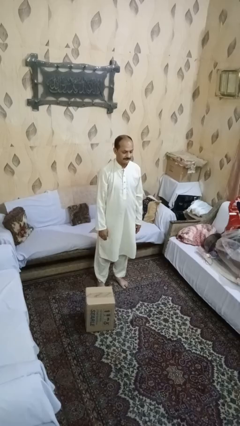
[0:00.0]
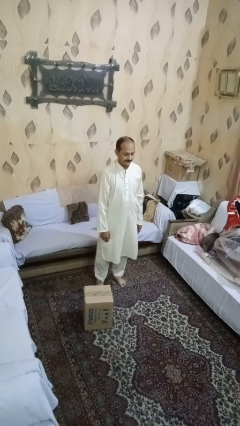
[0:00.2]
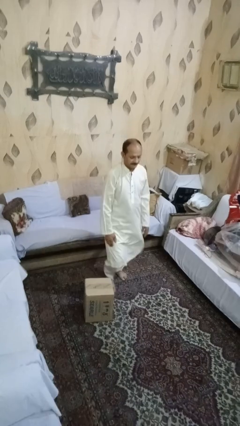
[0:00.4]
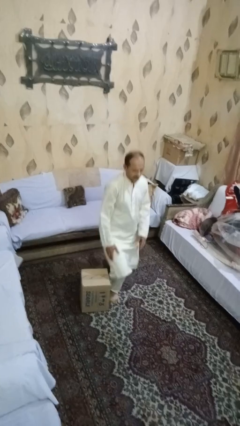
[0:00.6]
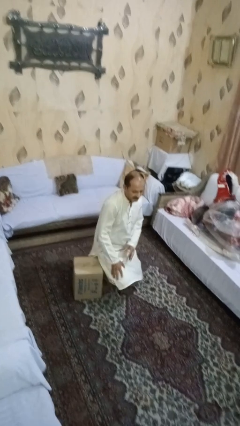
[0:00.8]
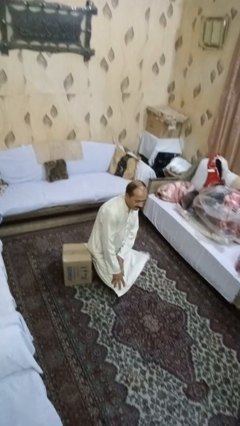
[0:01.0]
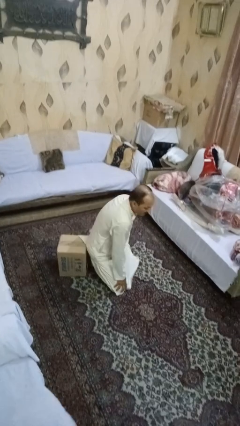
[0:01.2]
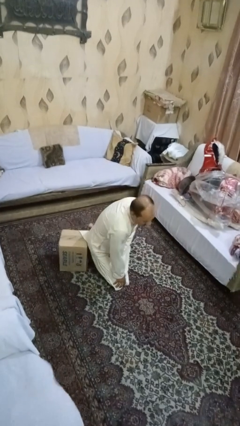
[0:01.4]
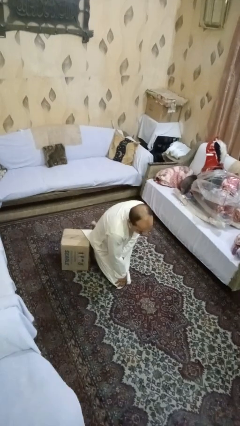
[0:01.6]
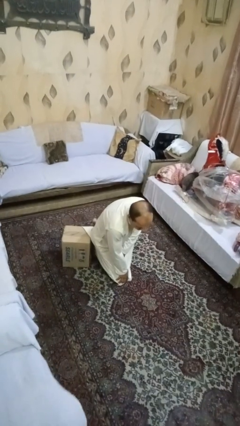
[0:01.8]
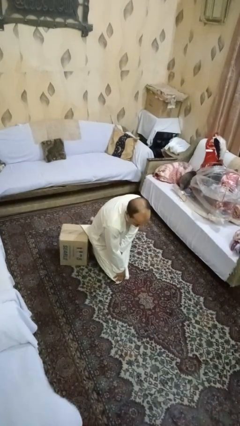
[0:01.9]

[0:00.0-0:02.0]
person trips on object on floor

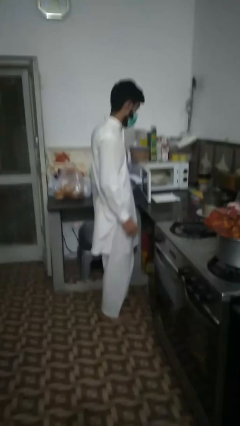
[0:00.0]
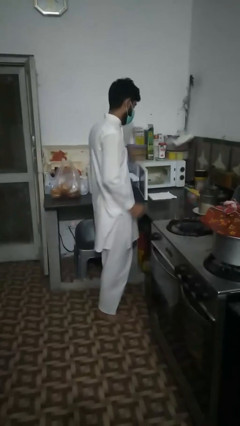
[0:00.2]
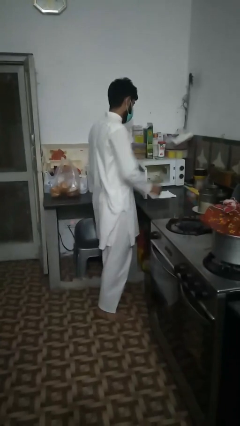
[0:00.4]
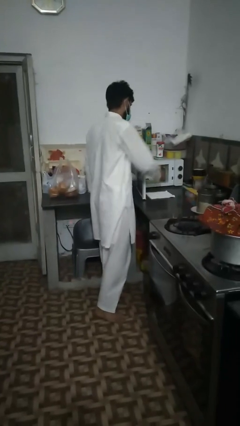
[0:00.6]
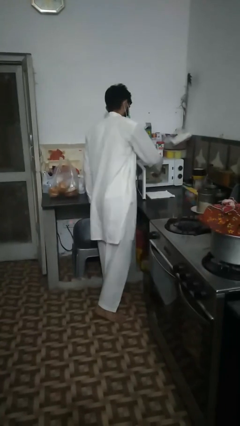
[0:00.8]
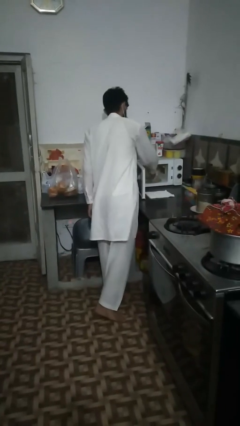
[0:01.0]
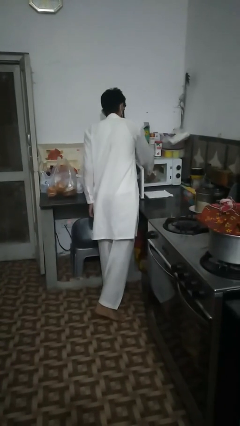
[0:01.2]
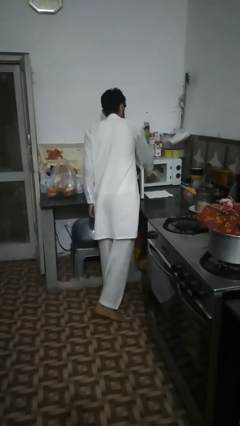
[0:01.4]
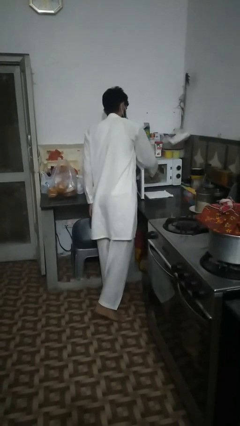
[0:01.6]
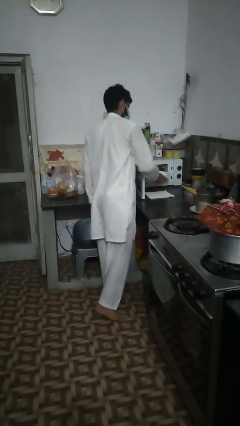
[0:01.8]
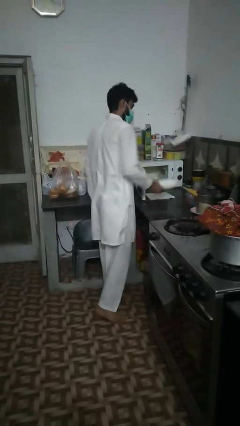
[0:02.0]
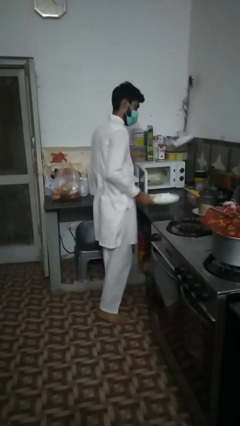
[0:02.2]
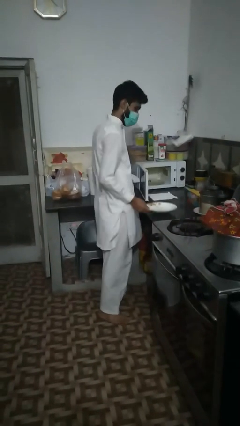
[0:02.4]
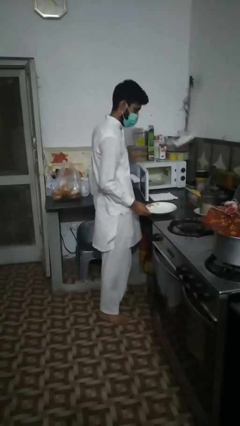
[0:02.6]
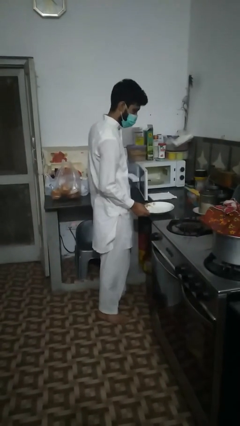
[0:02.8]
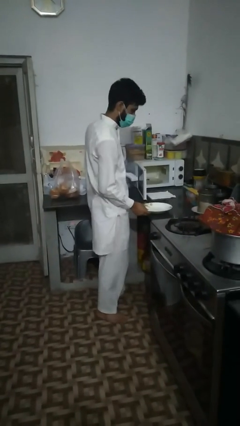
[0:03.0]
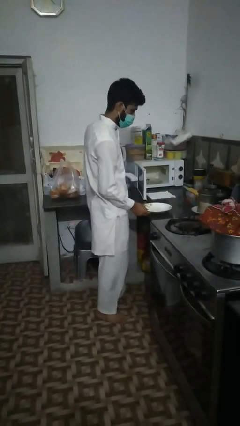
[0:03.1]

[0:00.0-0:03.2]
person takes object from microwave

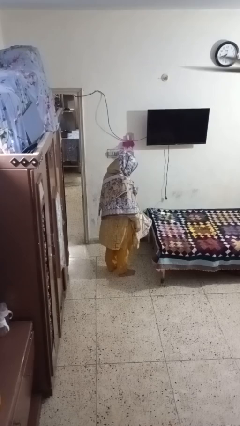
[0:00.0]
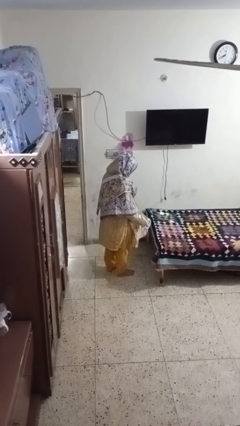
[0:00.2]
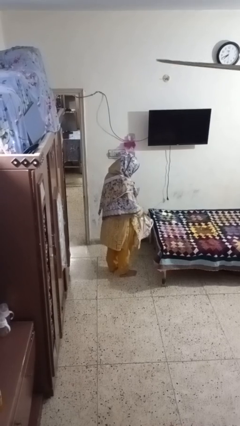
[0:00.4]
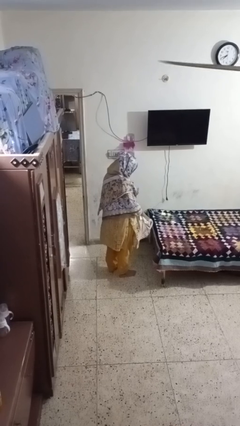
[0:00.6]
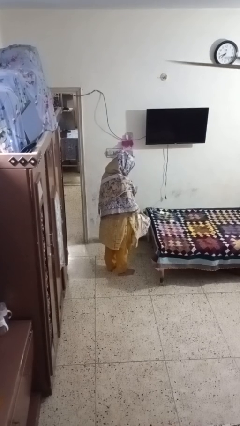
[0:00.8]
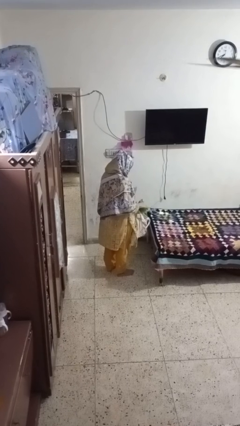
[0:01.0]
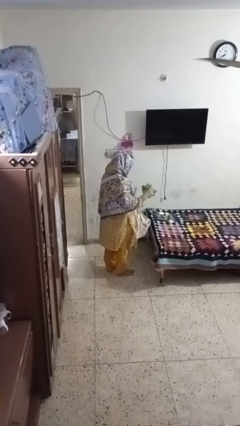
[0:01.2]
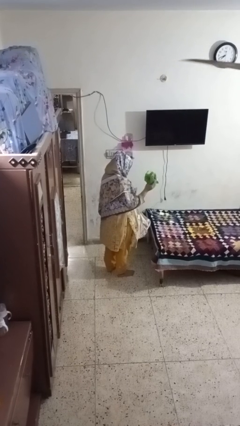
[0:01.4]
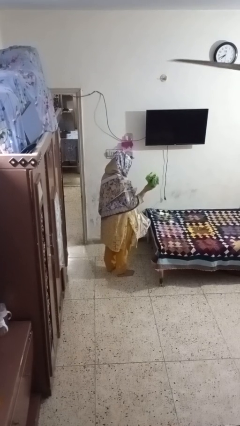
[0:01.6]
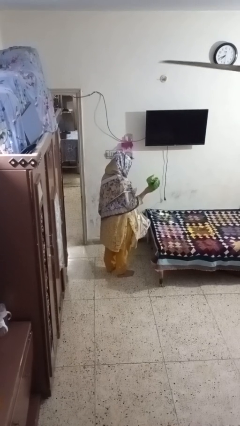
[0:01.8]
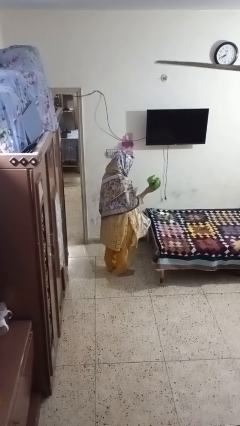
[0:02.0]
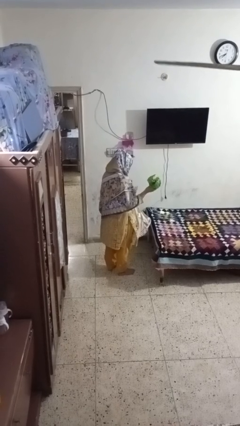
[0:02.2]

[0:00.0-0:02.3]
person takes object from bag

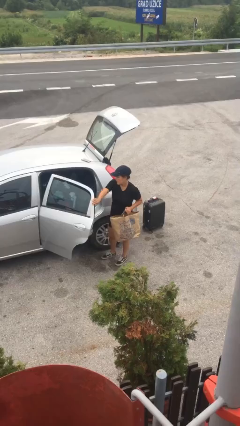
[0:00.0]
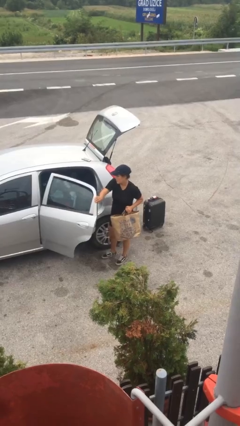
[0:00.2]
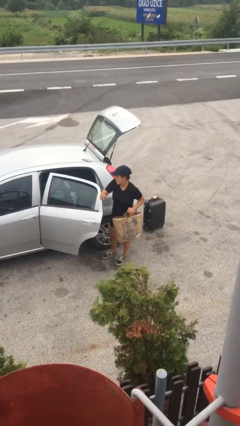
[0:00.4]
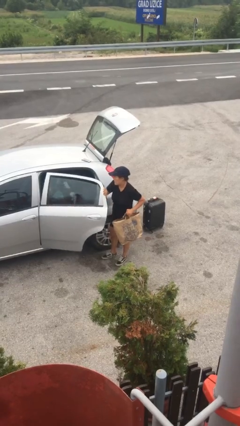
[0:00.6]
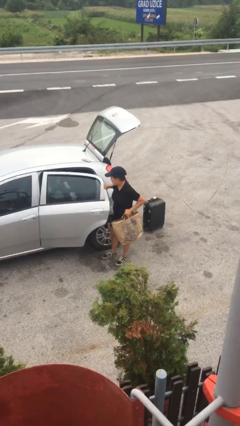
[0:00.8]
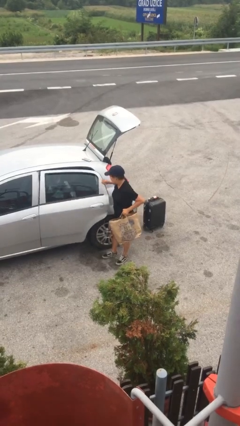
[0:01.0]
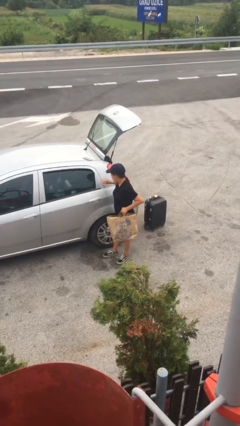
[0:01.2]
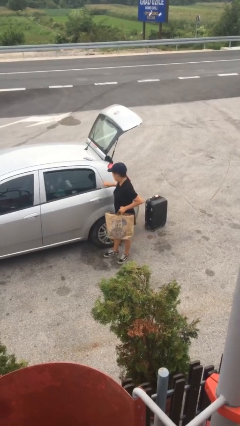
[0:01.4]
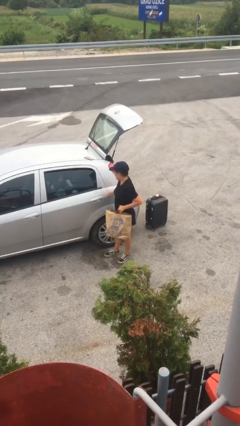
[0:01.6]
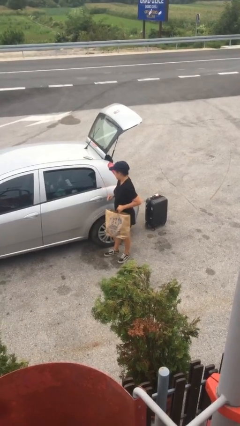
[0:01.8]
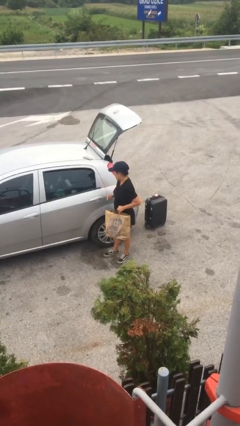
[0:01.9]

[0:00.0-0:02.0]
person closes car door

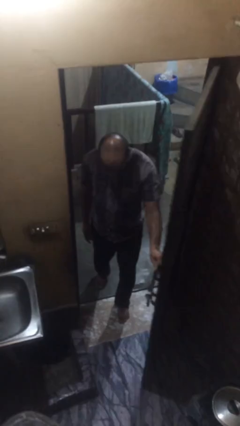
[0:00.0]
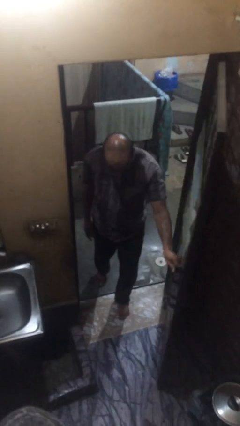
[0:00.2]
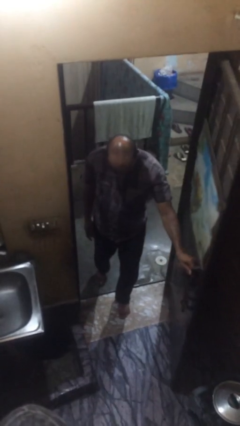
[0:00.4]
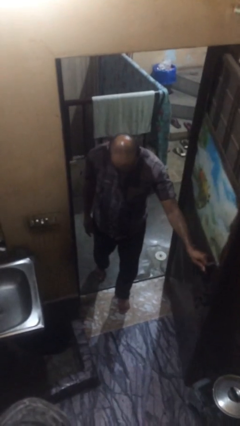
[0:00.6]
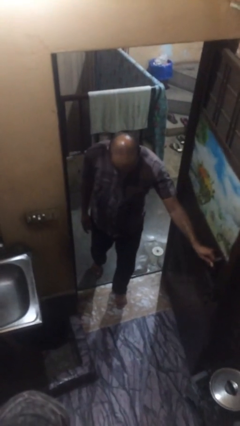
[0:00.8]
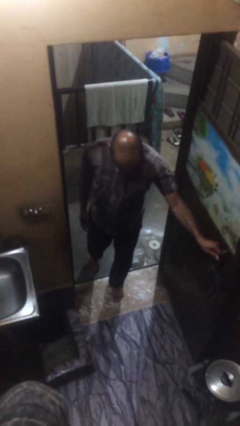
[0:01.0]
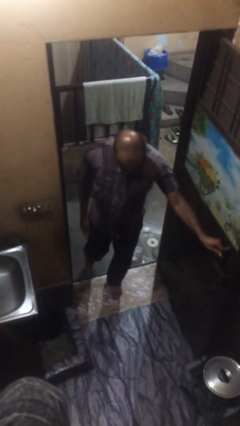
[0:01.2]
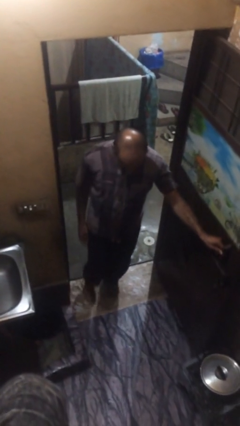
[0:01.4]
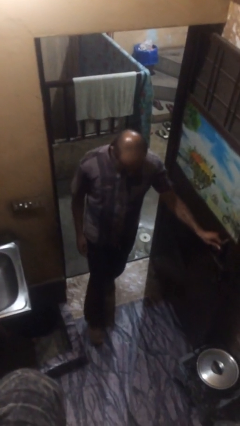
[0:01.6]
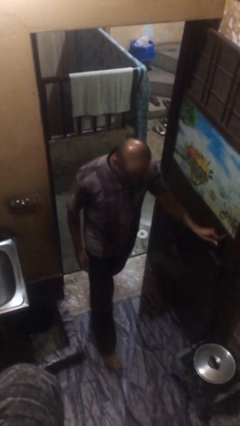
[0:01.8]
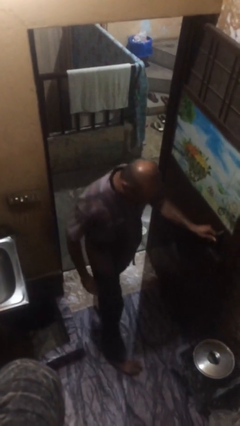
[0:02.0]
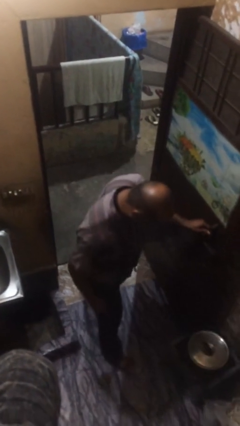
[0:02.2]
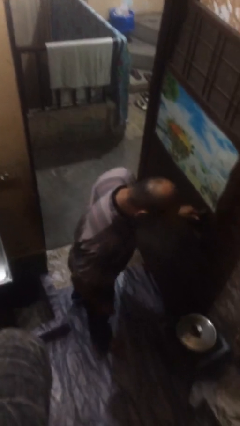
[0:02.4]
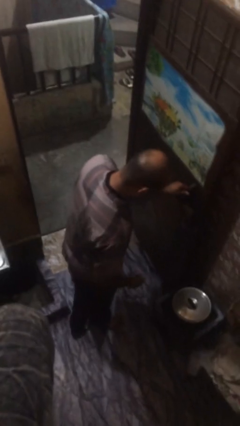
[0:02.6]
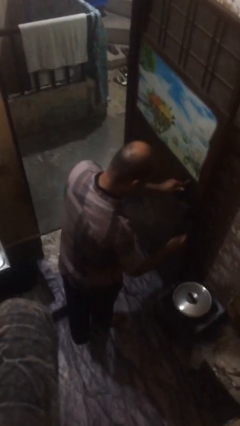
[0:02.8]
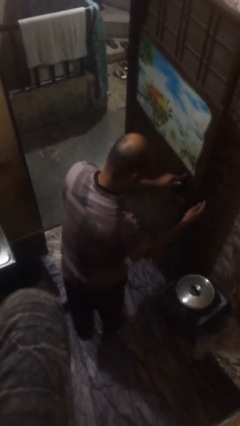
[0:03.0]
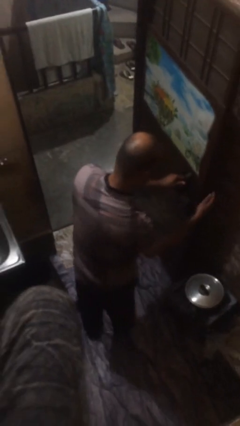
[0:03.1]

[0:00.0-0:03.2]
person enters scene through structure

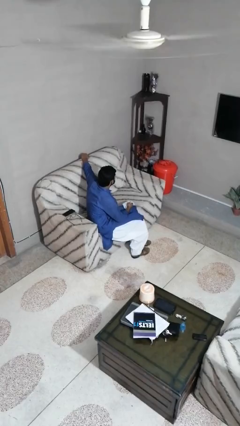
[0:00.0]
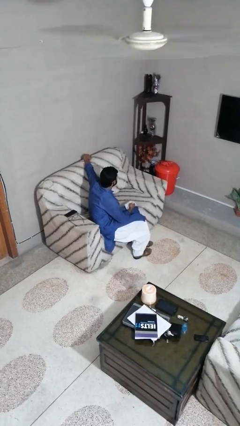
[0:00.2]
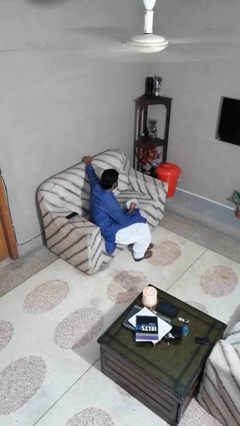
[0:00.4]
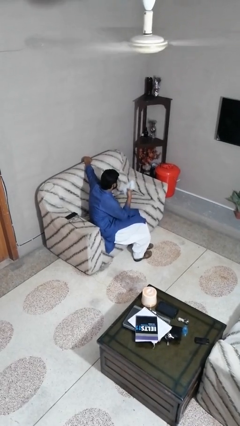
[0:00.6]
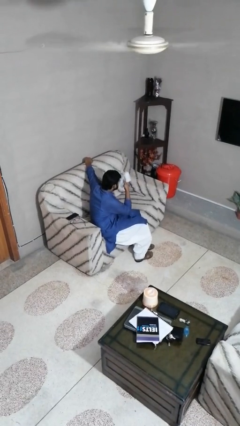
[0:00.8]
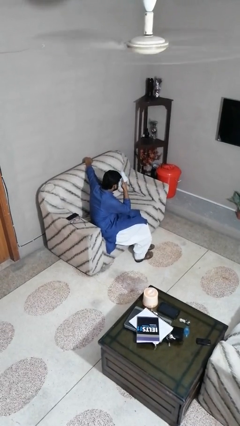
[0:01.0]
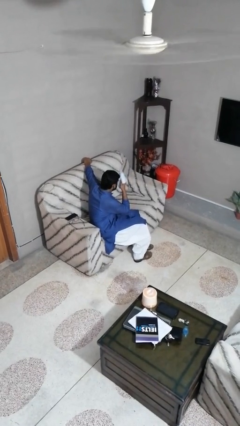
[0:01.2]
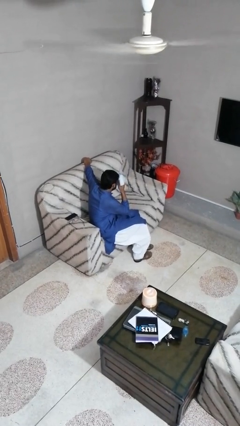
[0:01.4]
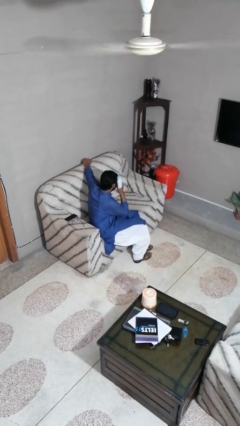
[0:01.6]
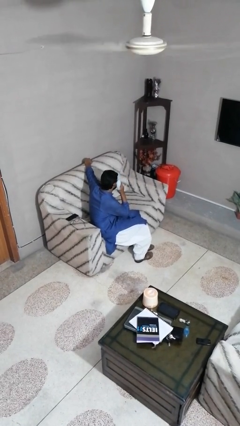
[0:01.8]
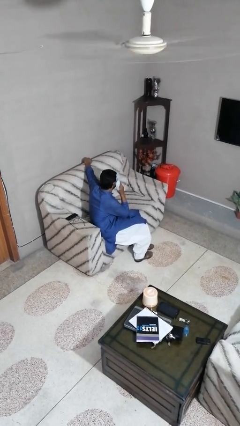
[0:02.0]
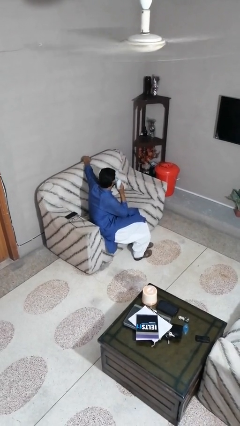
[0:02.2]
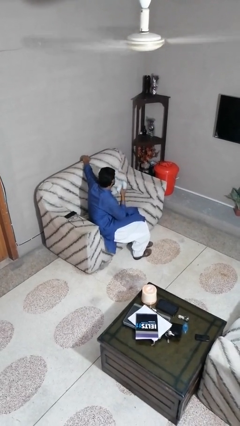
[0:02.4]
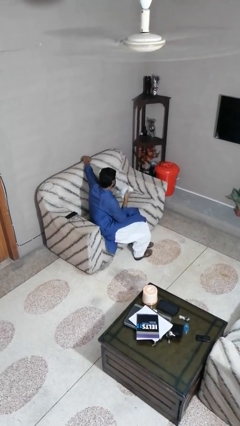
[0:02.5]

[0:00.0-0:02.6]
person wipes mouth with napkin

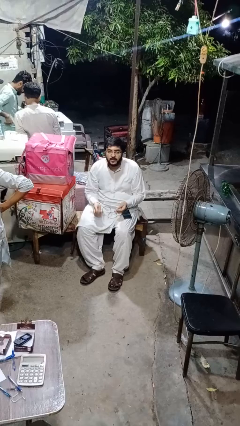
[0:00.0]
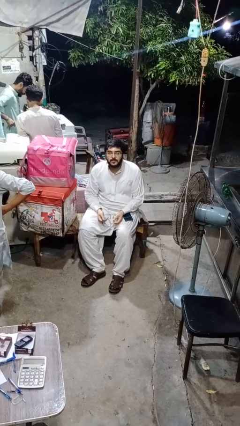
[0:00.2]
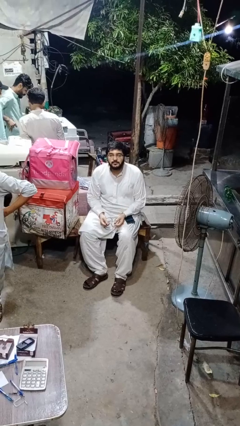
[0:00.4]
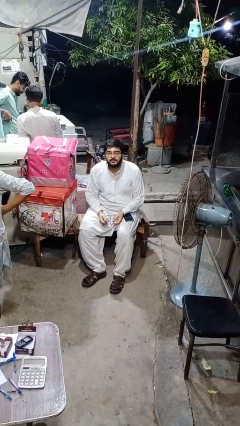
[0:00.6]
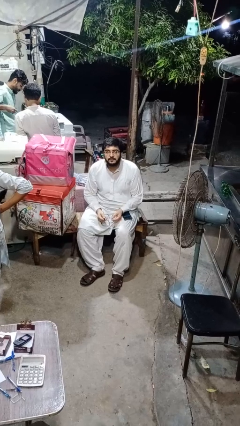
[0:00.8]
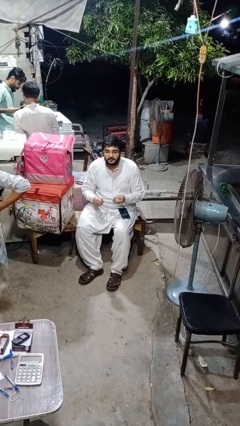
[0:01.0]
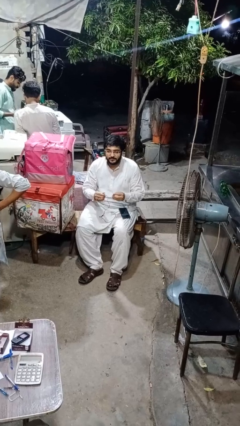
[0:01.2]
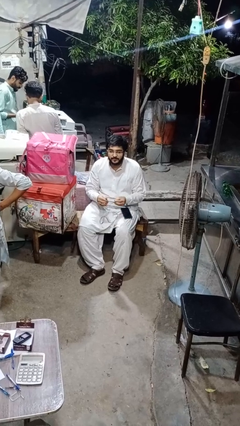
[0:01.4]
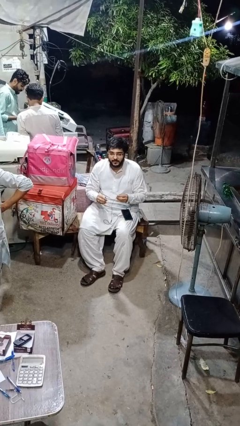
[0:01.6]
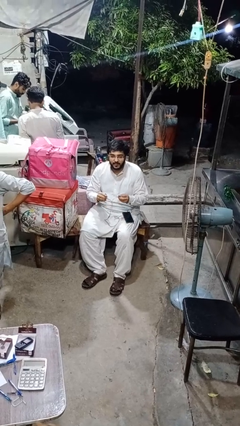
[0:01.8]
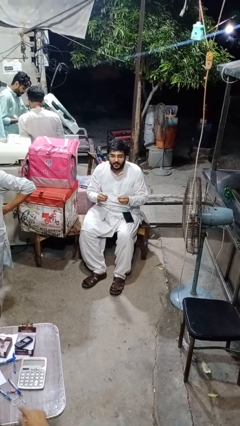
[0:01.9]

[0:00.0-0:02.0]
person takes off headphones
